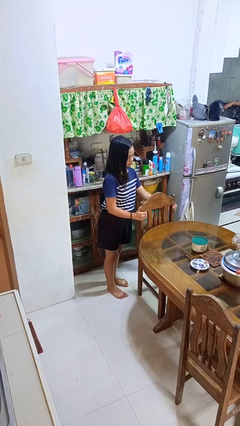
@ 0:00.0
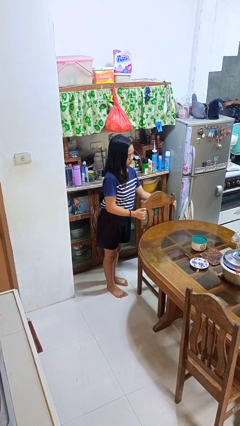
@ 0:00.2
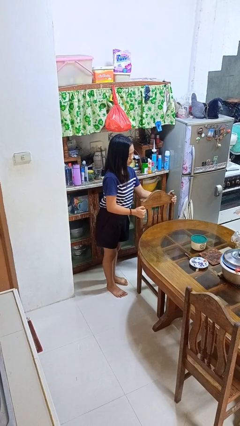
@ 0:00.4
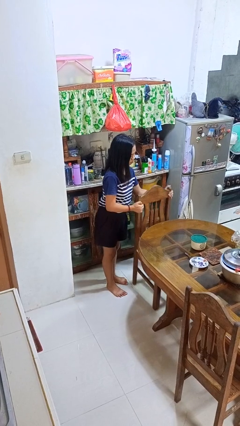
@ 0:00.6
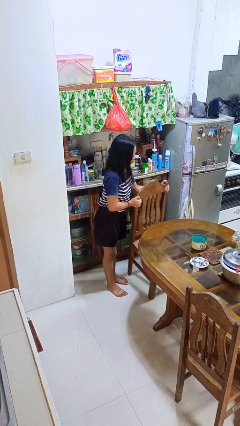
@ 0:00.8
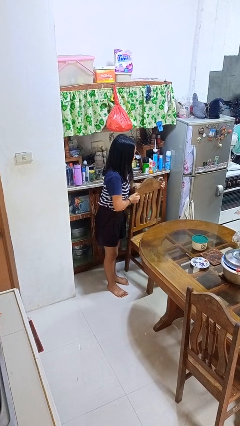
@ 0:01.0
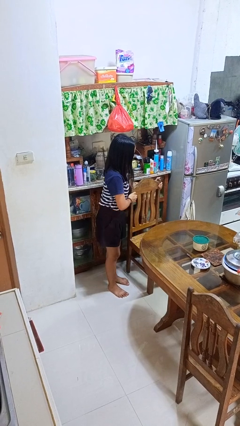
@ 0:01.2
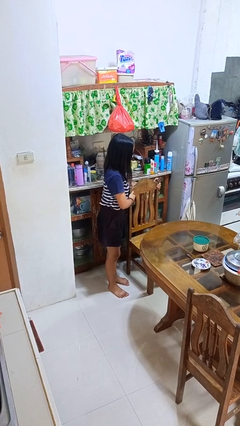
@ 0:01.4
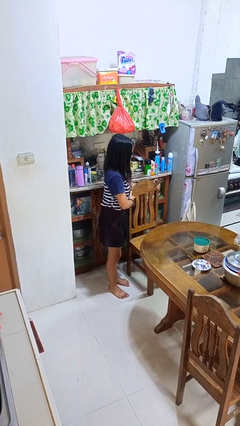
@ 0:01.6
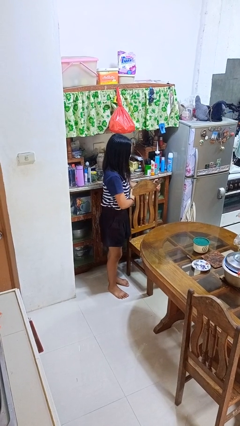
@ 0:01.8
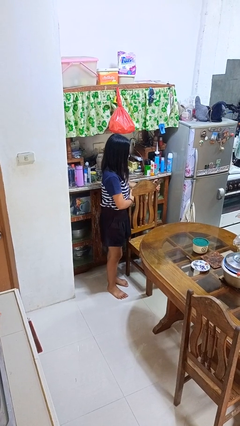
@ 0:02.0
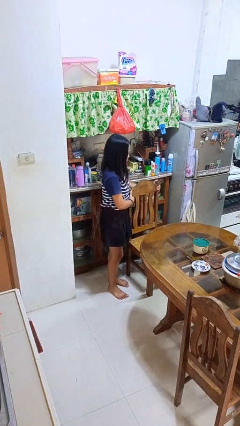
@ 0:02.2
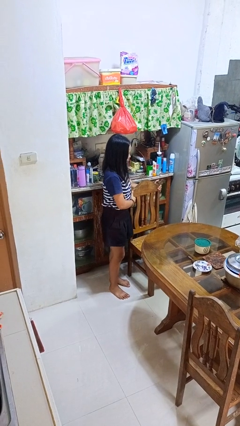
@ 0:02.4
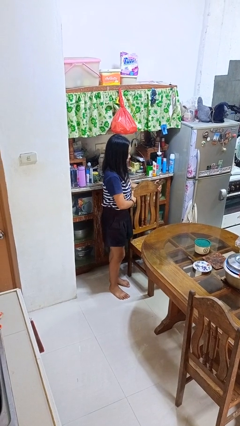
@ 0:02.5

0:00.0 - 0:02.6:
person pulls out chair

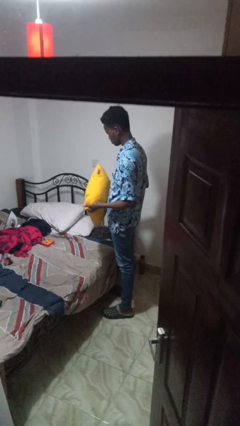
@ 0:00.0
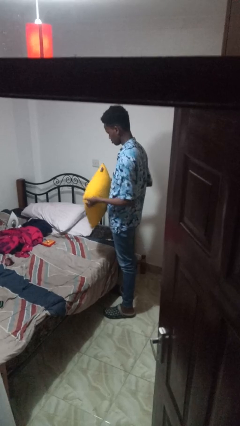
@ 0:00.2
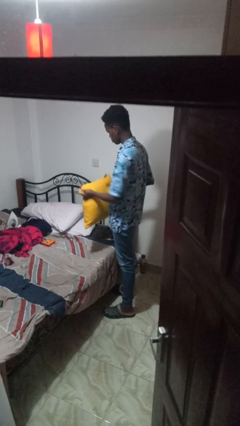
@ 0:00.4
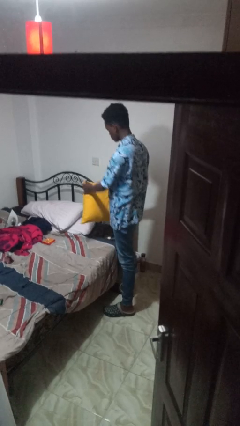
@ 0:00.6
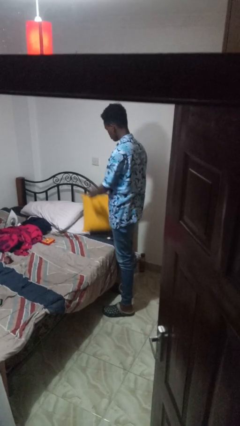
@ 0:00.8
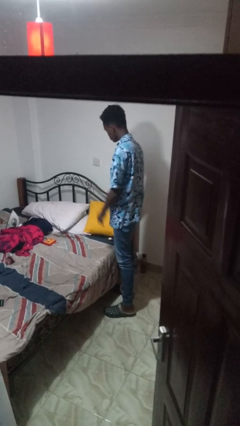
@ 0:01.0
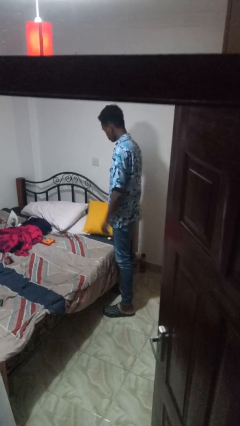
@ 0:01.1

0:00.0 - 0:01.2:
person puts down object on bed

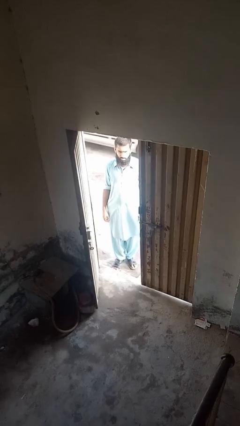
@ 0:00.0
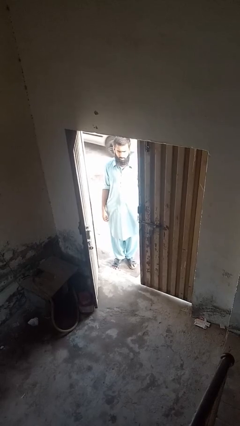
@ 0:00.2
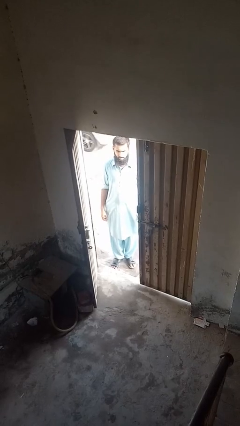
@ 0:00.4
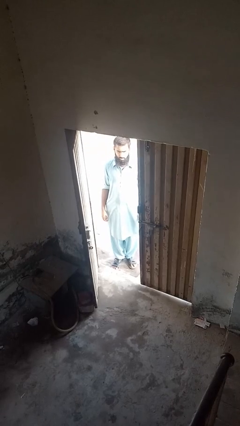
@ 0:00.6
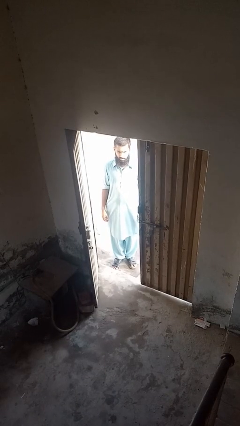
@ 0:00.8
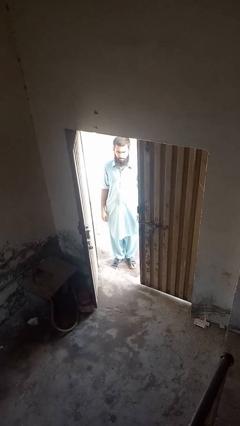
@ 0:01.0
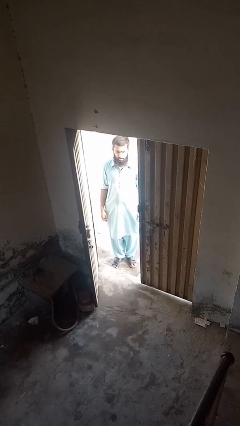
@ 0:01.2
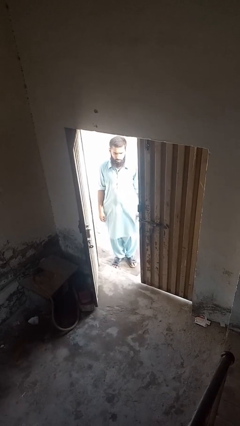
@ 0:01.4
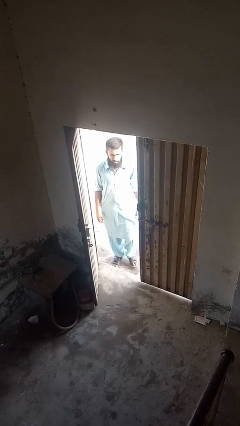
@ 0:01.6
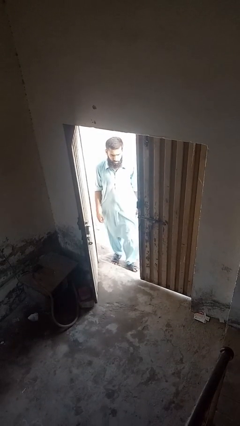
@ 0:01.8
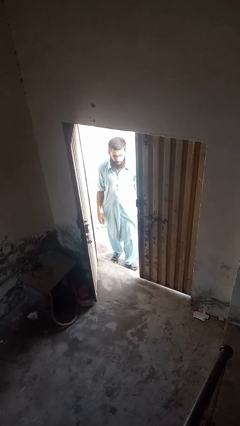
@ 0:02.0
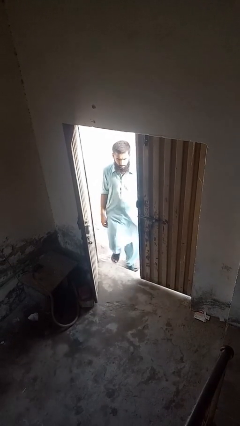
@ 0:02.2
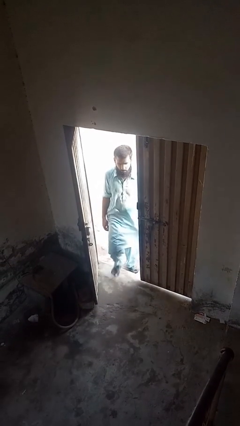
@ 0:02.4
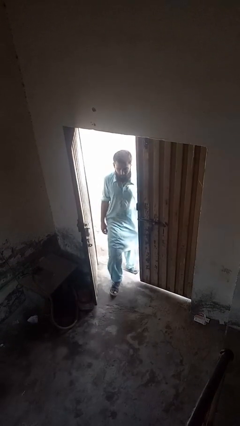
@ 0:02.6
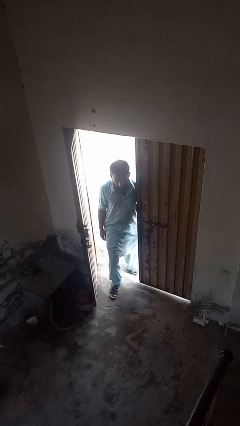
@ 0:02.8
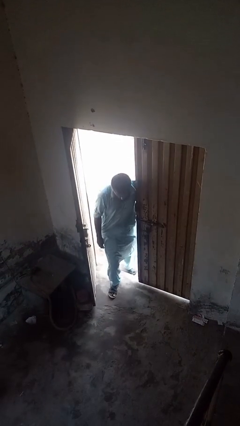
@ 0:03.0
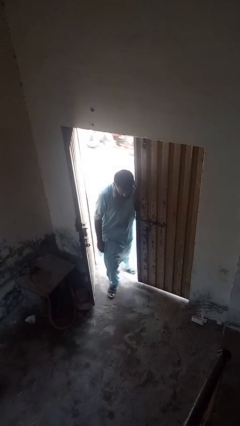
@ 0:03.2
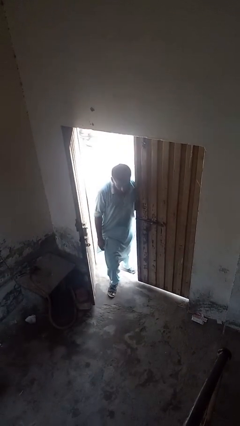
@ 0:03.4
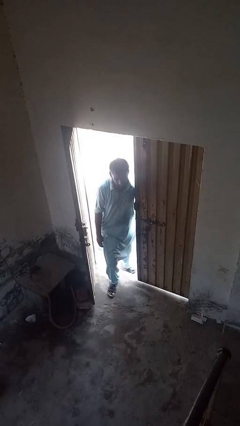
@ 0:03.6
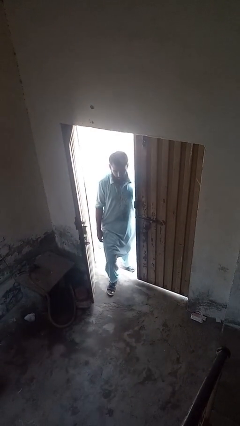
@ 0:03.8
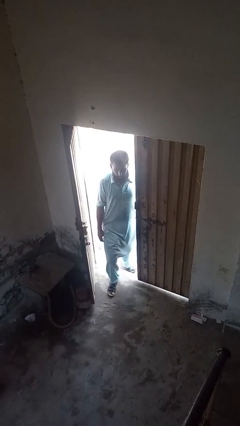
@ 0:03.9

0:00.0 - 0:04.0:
person bumps into wall

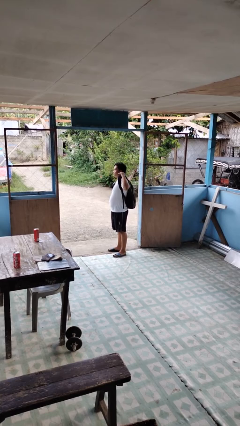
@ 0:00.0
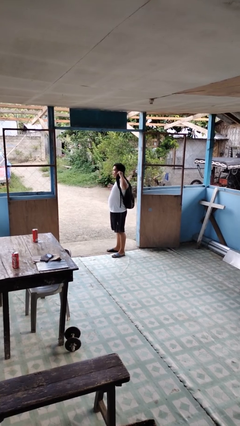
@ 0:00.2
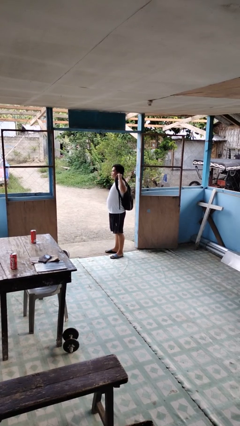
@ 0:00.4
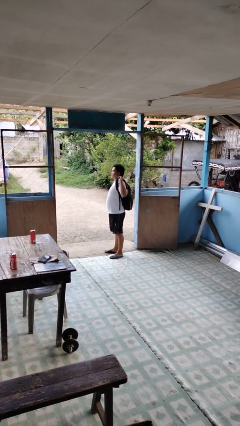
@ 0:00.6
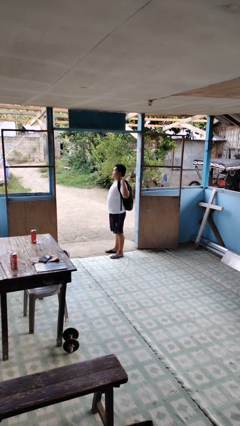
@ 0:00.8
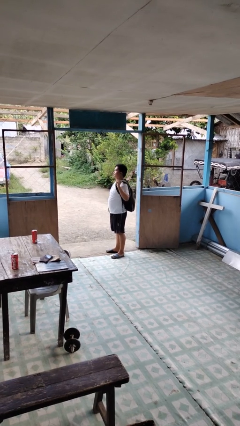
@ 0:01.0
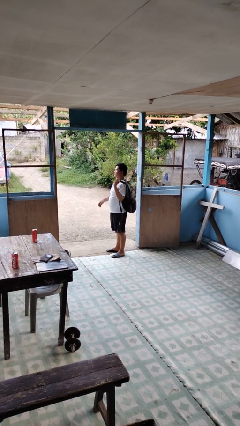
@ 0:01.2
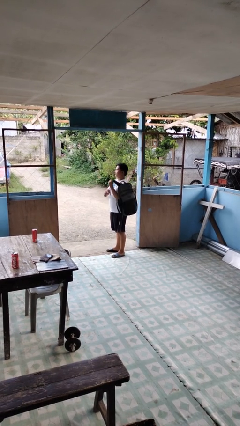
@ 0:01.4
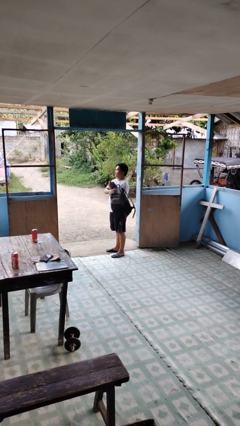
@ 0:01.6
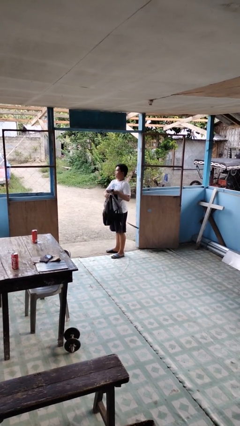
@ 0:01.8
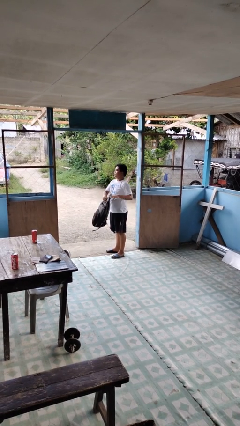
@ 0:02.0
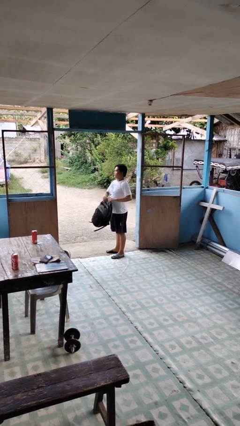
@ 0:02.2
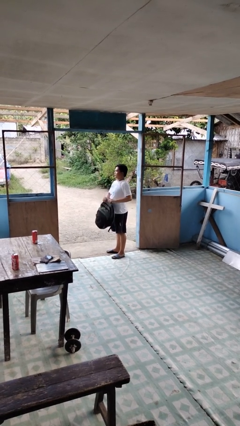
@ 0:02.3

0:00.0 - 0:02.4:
person takes off backpack

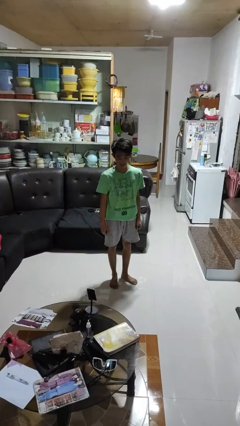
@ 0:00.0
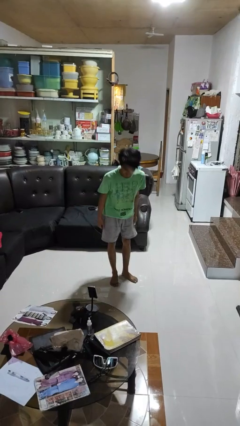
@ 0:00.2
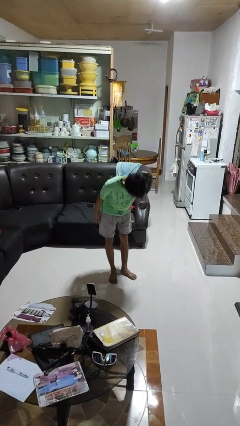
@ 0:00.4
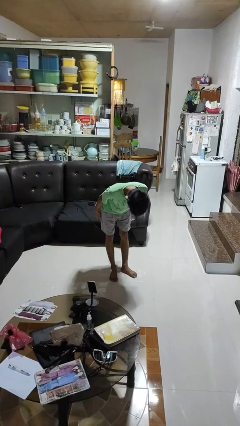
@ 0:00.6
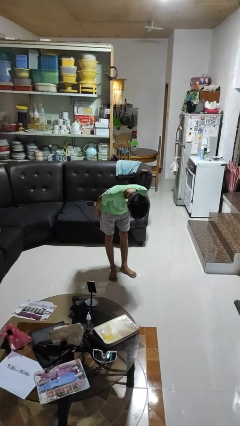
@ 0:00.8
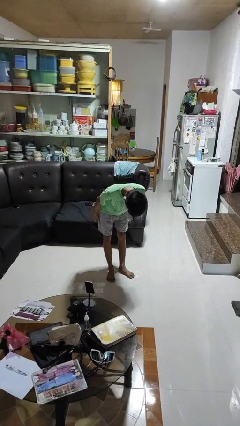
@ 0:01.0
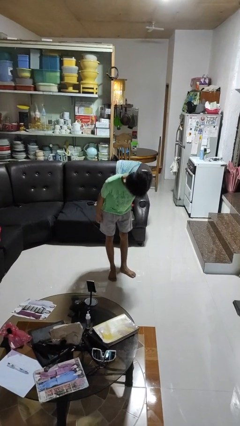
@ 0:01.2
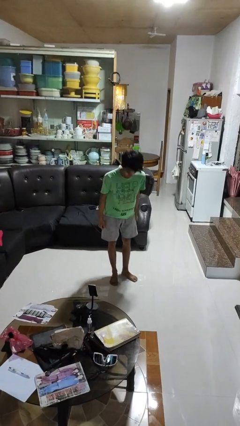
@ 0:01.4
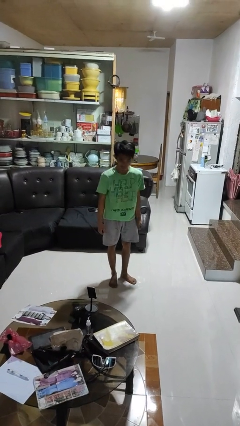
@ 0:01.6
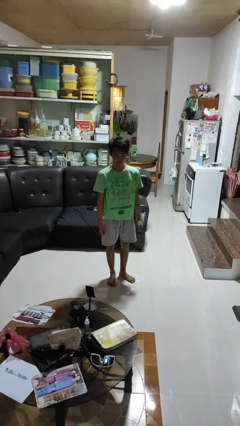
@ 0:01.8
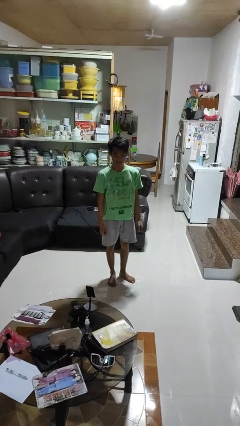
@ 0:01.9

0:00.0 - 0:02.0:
person bows

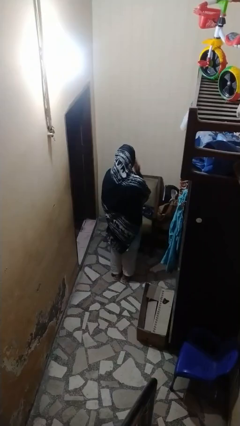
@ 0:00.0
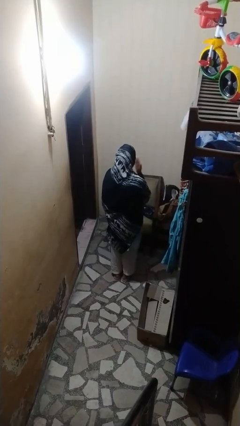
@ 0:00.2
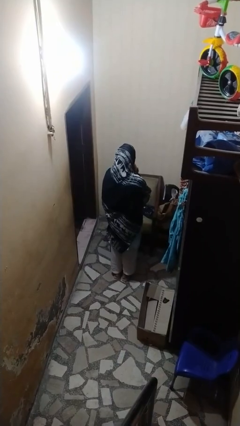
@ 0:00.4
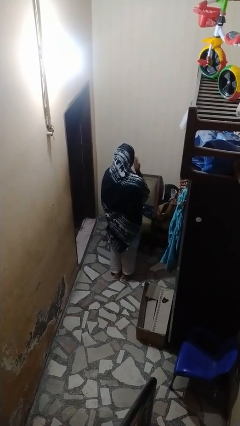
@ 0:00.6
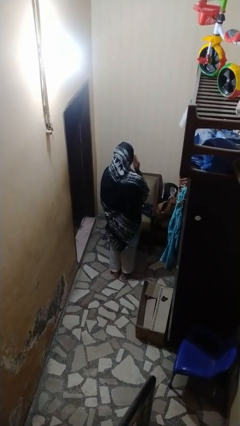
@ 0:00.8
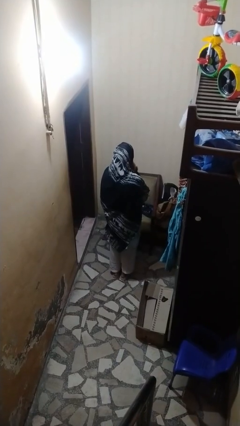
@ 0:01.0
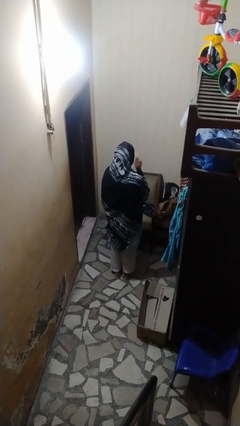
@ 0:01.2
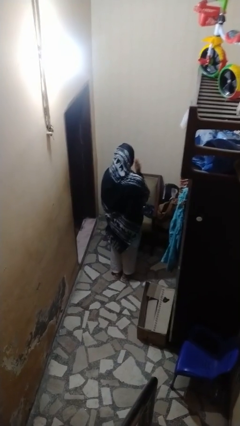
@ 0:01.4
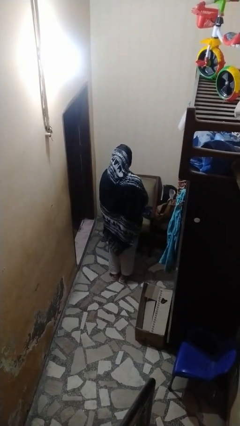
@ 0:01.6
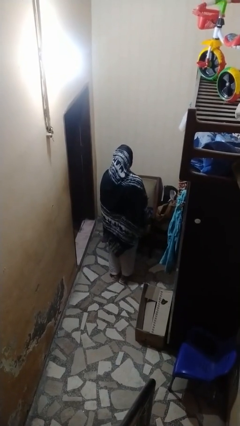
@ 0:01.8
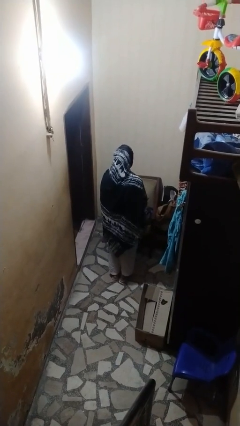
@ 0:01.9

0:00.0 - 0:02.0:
person gestures blow kiss

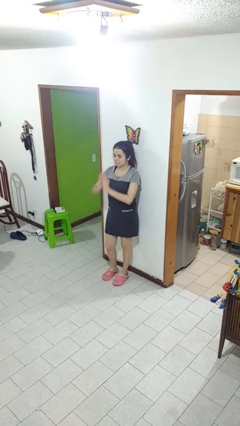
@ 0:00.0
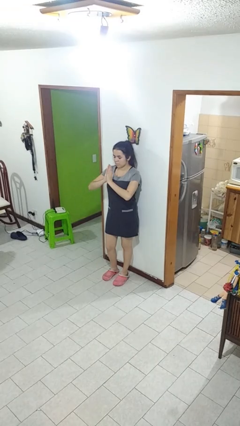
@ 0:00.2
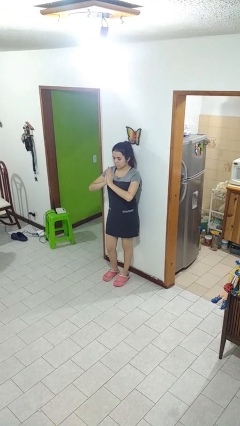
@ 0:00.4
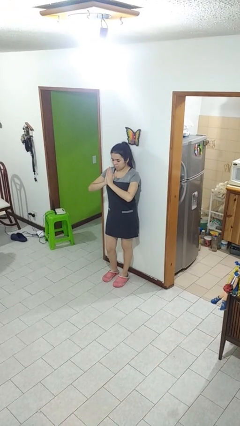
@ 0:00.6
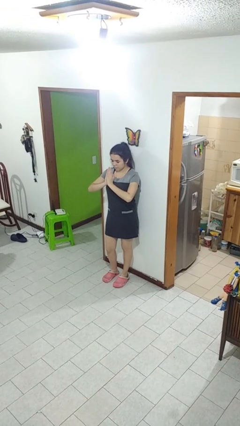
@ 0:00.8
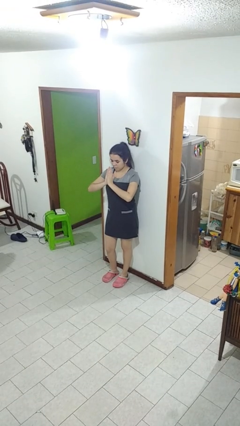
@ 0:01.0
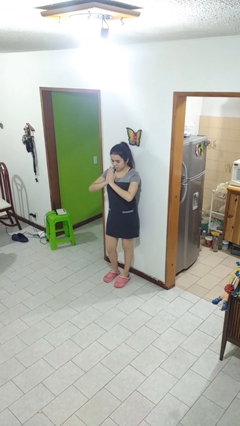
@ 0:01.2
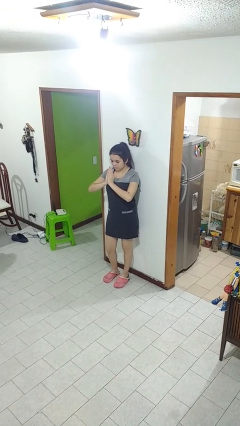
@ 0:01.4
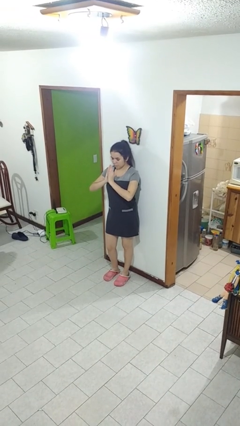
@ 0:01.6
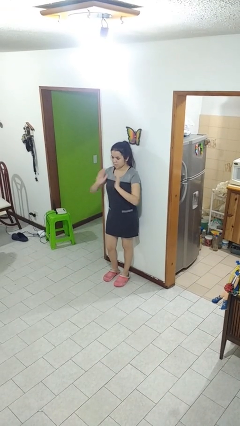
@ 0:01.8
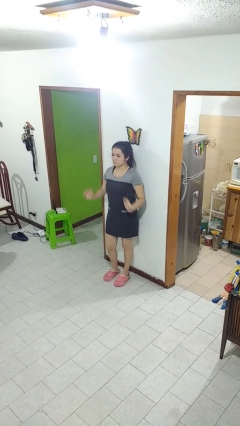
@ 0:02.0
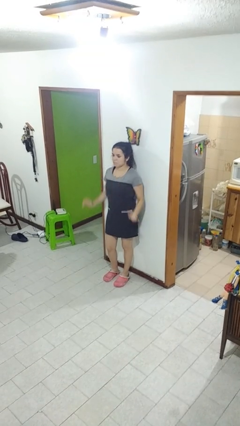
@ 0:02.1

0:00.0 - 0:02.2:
person prays

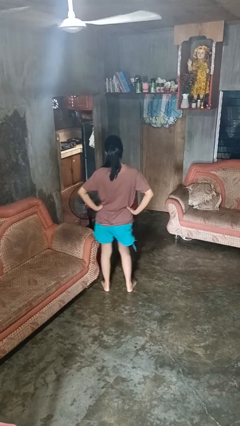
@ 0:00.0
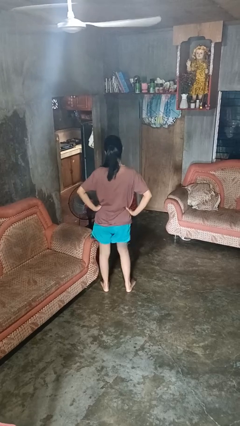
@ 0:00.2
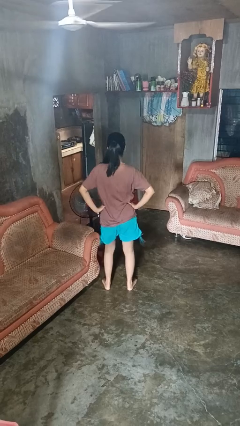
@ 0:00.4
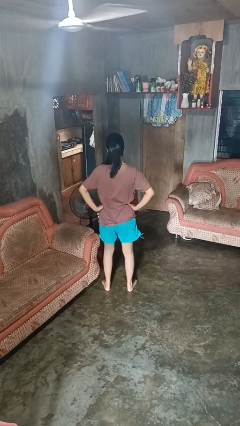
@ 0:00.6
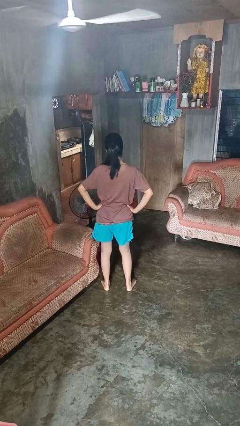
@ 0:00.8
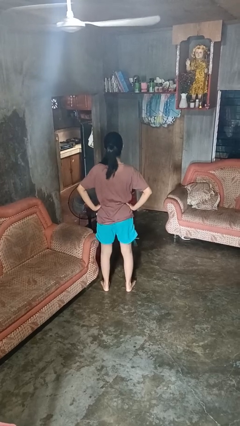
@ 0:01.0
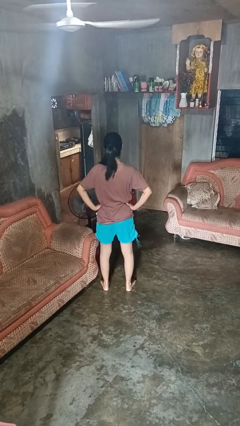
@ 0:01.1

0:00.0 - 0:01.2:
person wiggles hips
